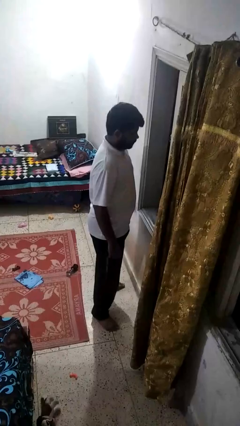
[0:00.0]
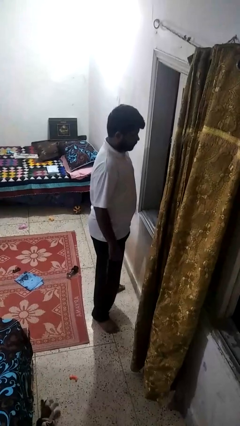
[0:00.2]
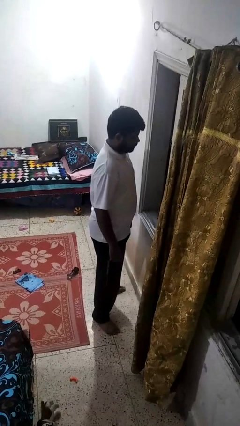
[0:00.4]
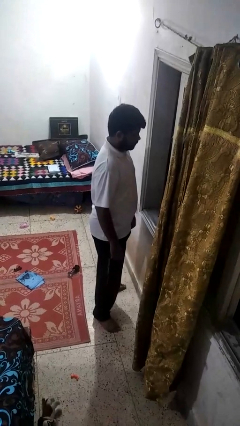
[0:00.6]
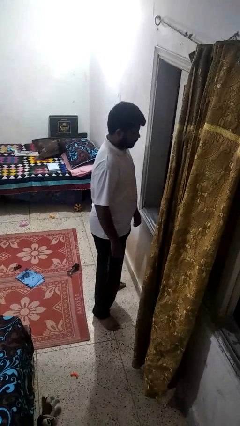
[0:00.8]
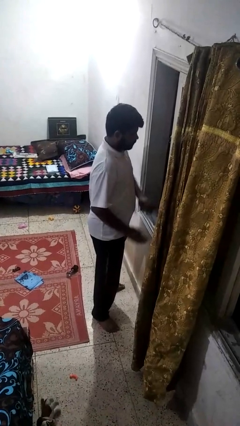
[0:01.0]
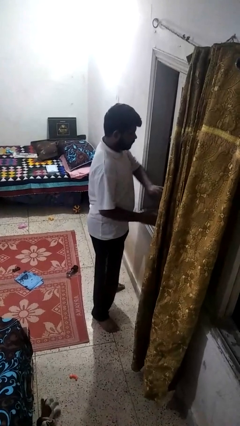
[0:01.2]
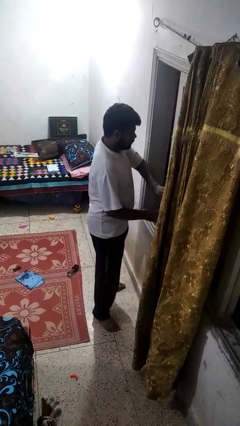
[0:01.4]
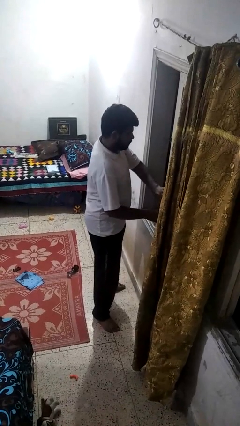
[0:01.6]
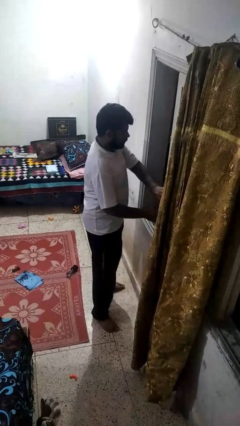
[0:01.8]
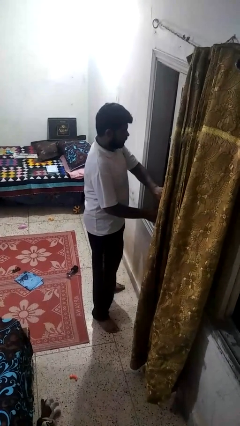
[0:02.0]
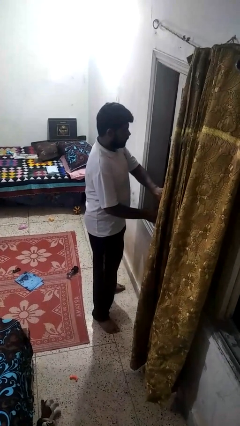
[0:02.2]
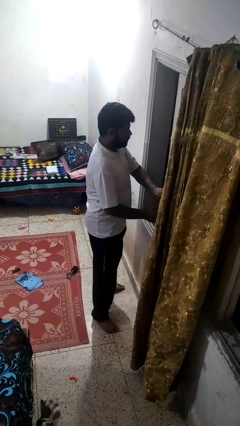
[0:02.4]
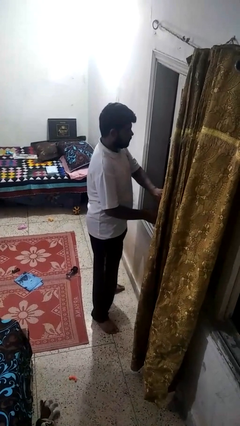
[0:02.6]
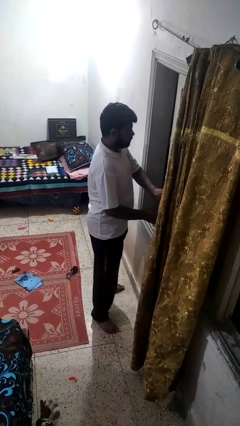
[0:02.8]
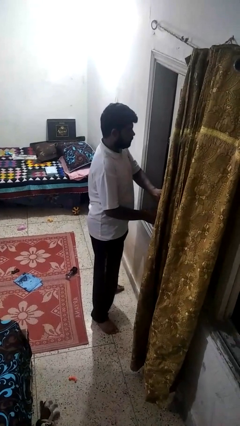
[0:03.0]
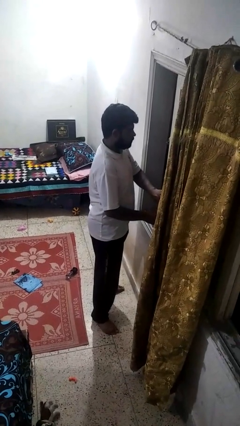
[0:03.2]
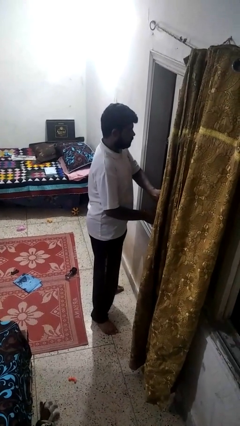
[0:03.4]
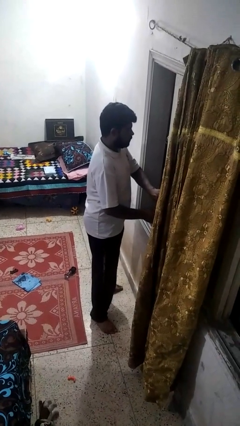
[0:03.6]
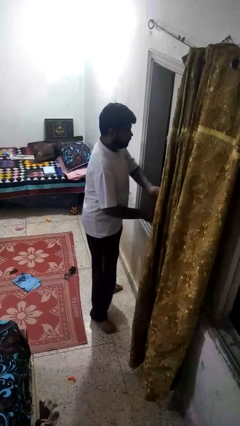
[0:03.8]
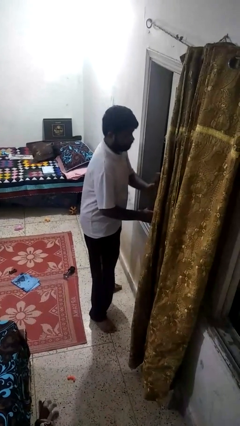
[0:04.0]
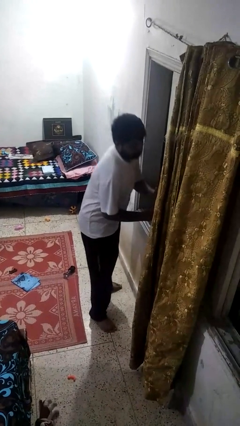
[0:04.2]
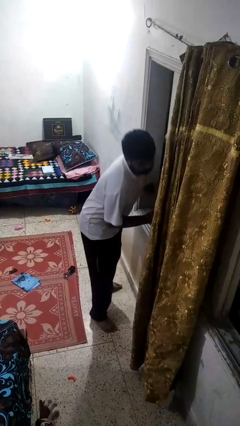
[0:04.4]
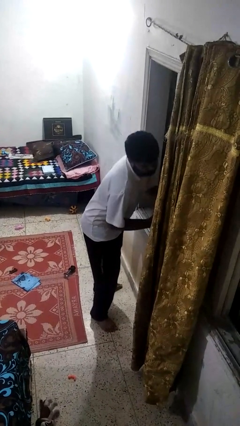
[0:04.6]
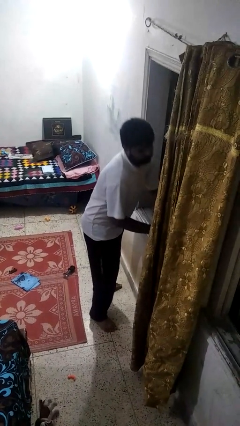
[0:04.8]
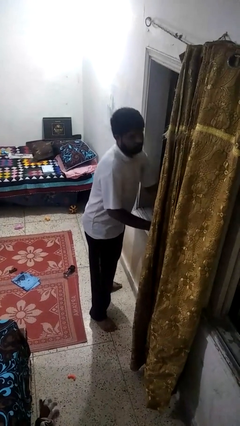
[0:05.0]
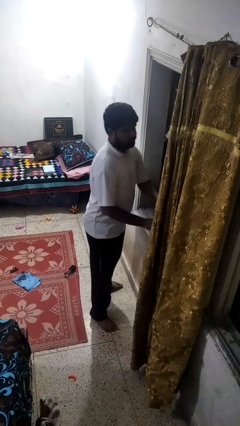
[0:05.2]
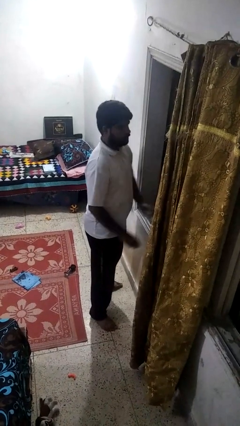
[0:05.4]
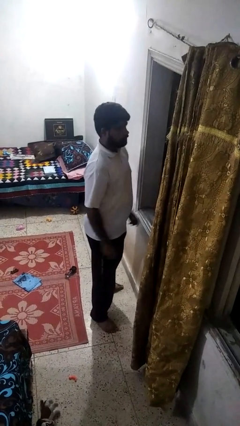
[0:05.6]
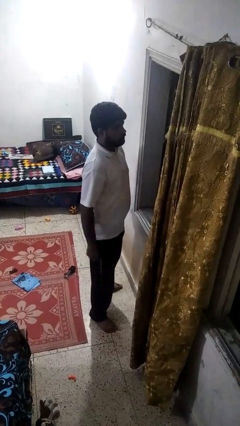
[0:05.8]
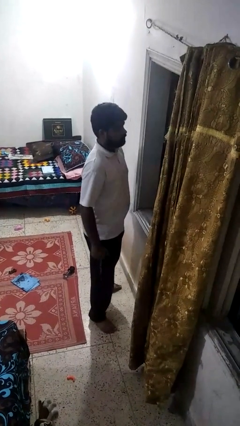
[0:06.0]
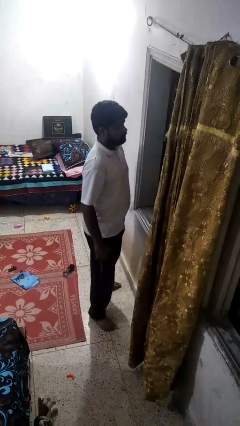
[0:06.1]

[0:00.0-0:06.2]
person opens sliding door

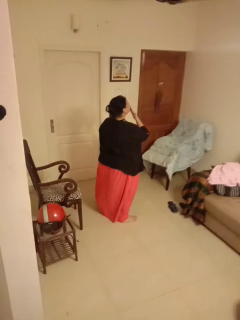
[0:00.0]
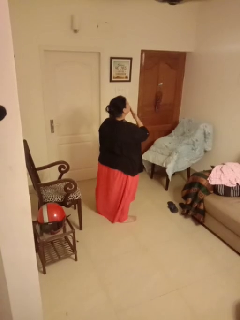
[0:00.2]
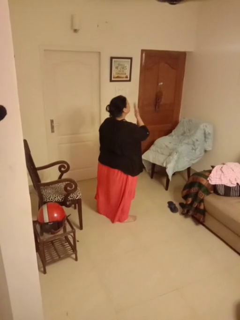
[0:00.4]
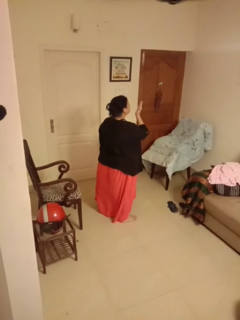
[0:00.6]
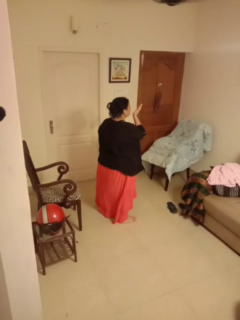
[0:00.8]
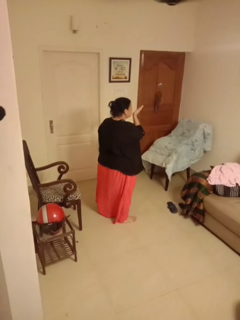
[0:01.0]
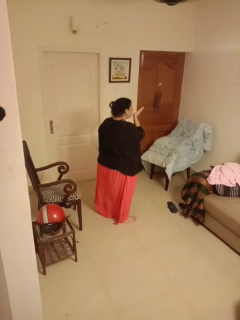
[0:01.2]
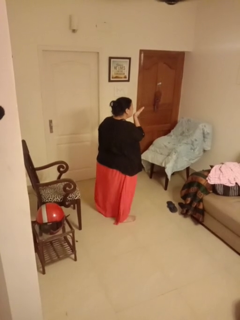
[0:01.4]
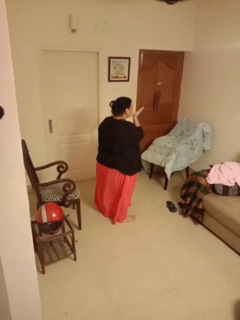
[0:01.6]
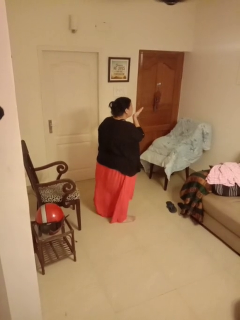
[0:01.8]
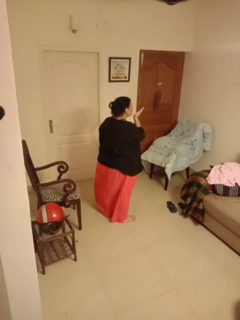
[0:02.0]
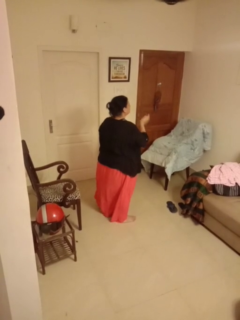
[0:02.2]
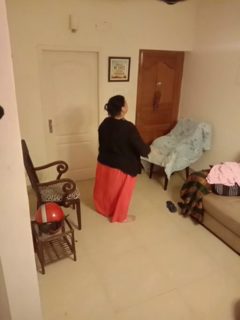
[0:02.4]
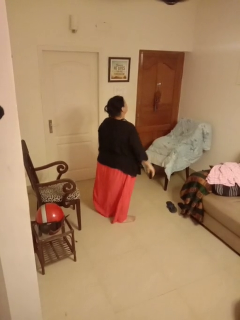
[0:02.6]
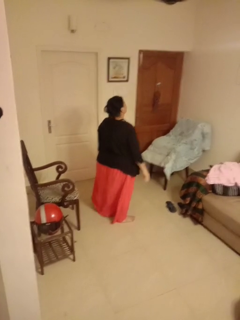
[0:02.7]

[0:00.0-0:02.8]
person gestures blow kiss

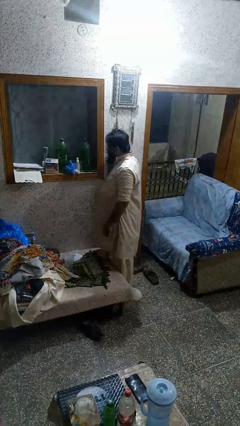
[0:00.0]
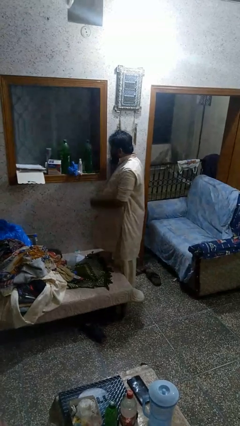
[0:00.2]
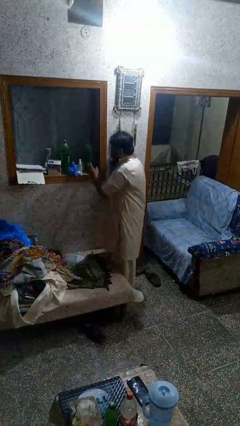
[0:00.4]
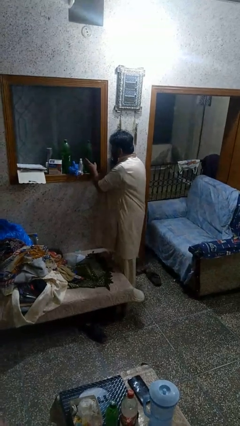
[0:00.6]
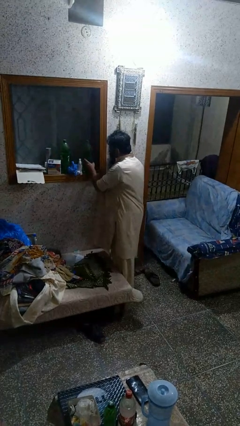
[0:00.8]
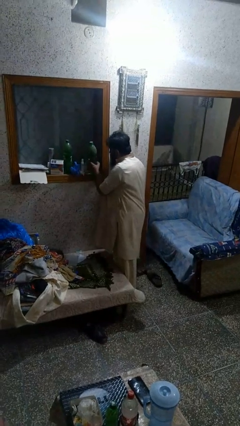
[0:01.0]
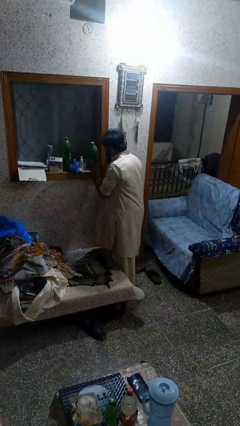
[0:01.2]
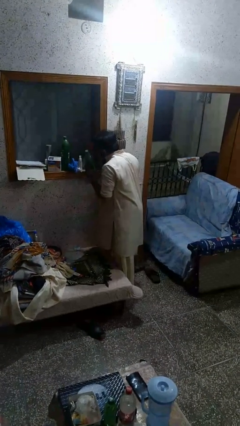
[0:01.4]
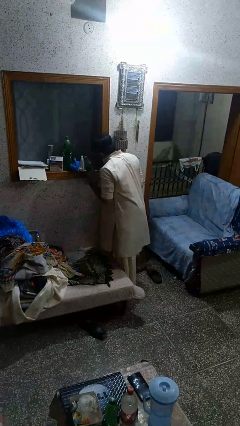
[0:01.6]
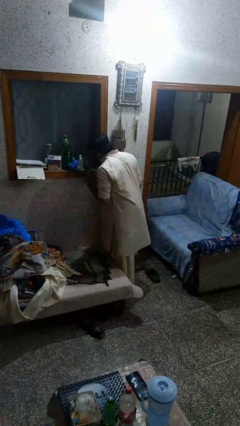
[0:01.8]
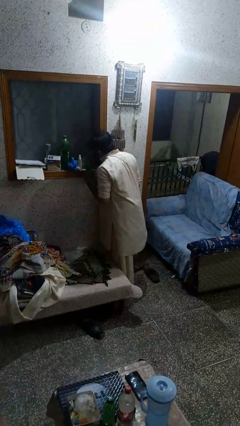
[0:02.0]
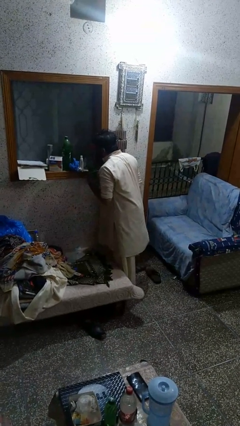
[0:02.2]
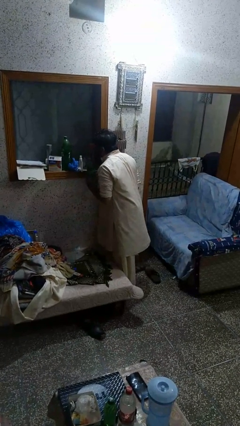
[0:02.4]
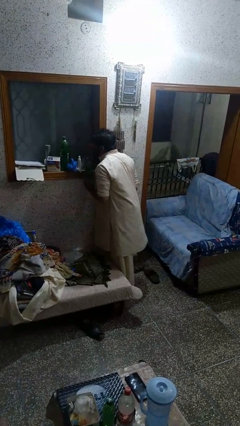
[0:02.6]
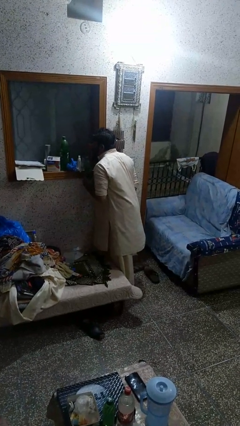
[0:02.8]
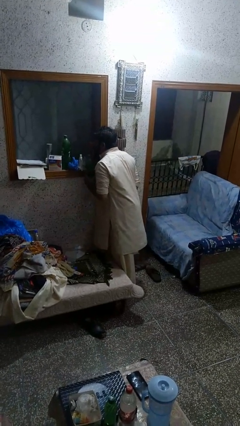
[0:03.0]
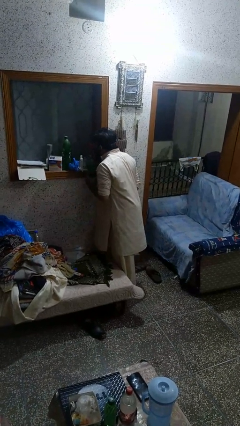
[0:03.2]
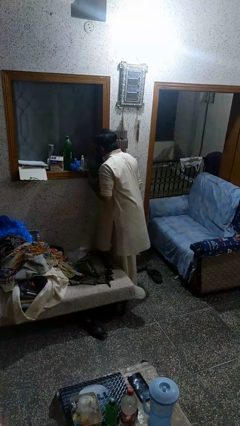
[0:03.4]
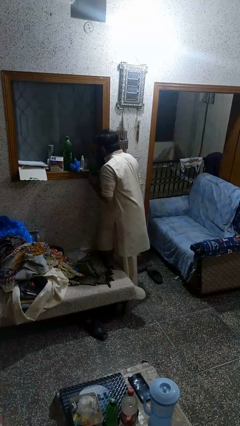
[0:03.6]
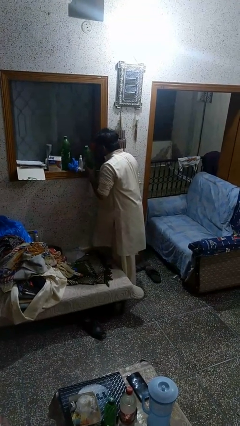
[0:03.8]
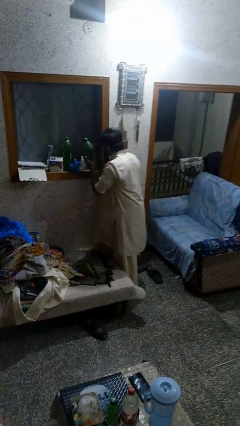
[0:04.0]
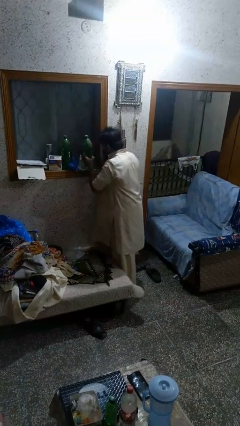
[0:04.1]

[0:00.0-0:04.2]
person searches in cabinet

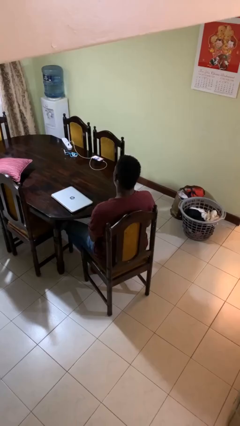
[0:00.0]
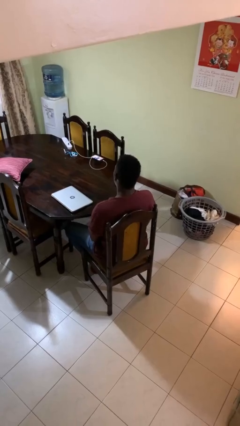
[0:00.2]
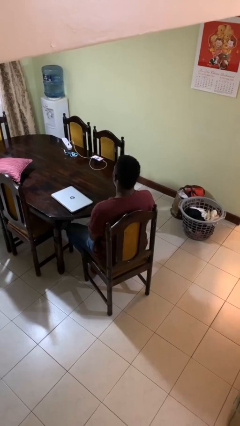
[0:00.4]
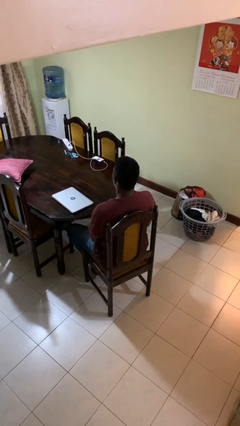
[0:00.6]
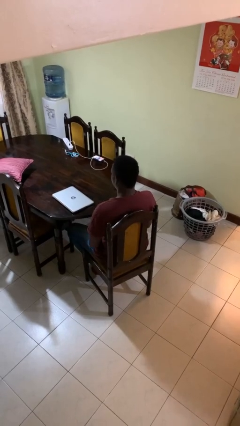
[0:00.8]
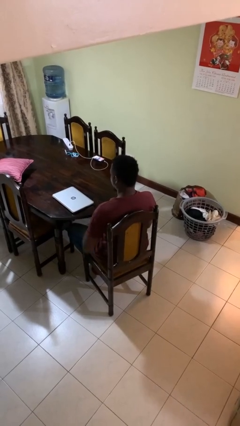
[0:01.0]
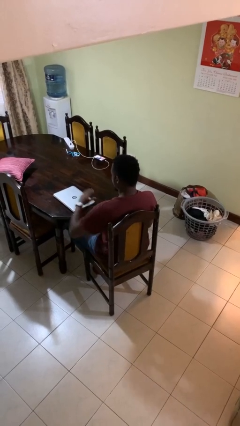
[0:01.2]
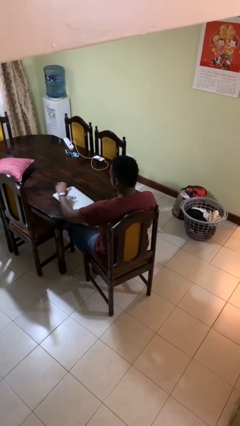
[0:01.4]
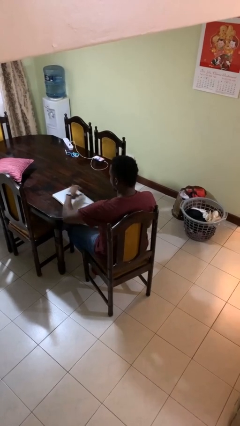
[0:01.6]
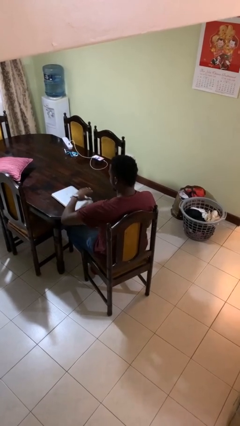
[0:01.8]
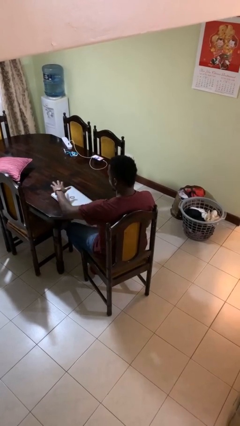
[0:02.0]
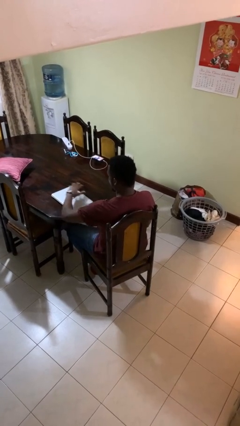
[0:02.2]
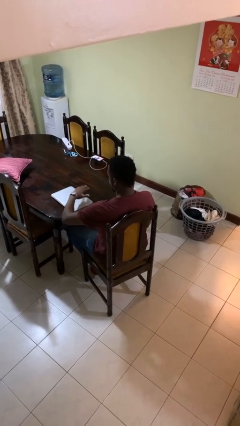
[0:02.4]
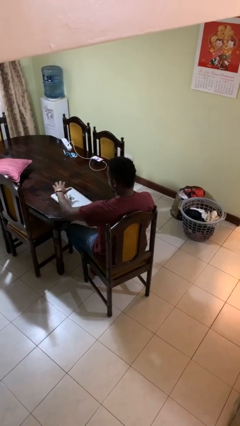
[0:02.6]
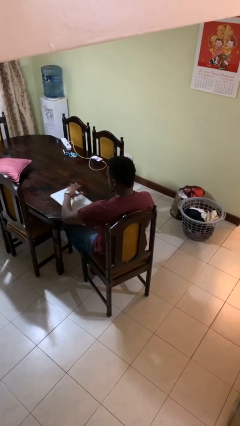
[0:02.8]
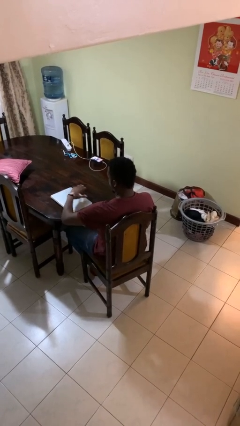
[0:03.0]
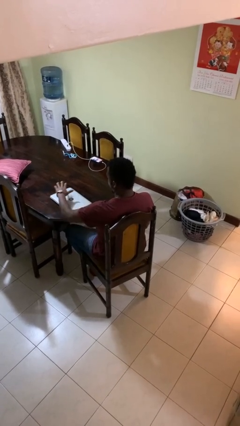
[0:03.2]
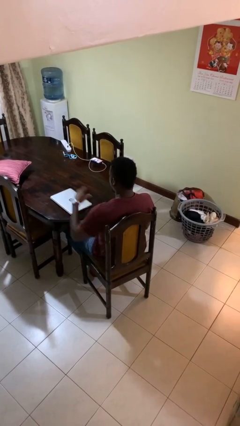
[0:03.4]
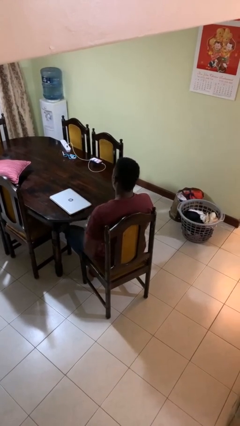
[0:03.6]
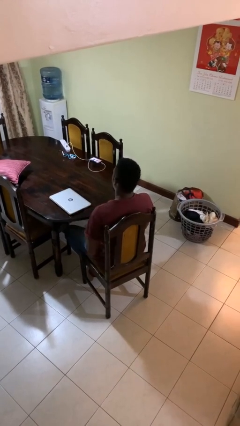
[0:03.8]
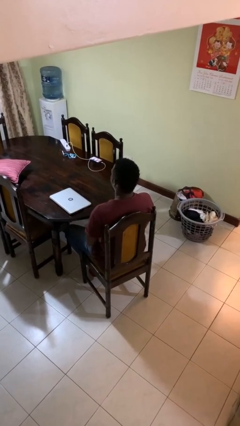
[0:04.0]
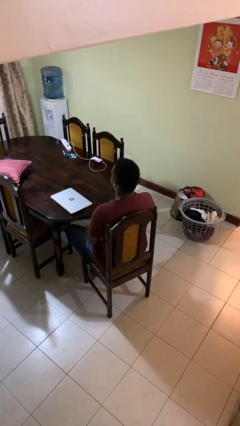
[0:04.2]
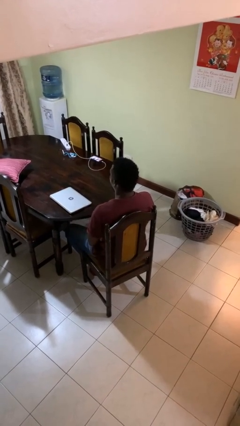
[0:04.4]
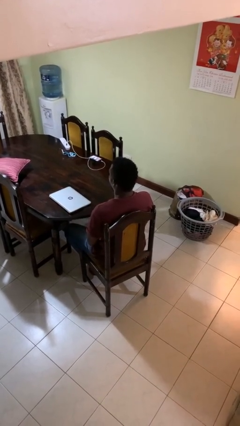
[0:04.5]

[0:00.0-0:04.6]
person waves hand over object

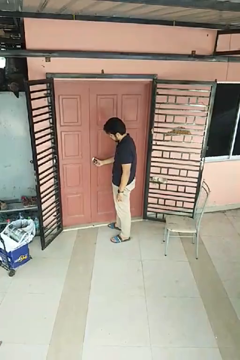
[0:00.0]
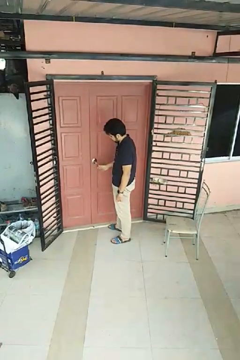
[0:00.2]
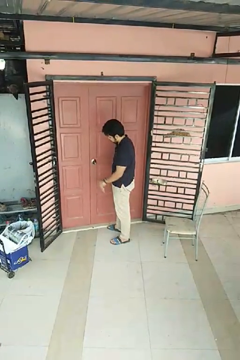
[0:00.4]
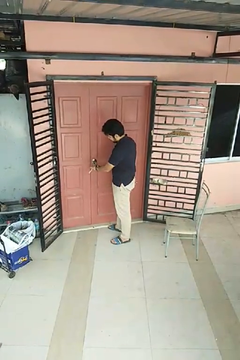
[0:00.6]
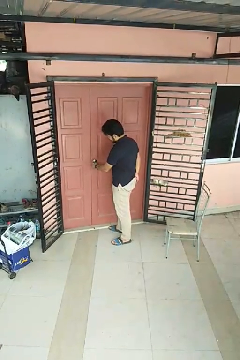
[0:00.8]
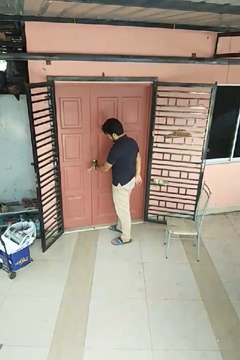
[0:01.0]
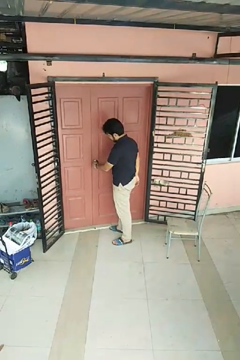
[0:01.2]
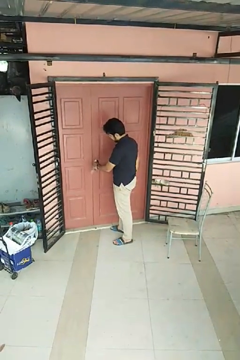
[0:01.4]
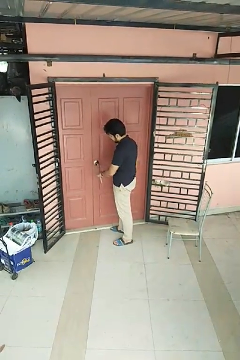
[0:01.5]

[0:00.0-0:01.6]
person locks door with keys
